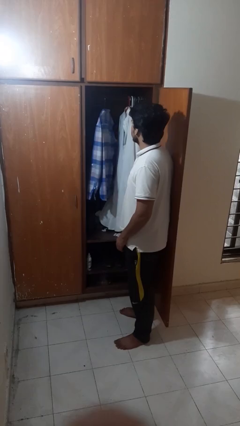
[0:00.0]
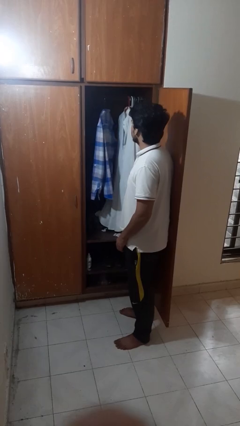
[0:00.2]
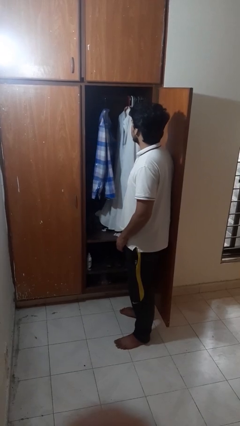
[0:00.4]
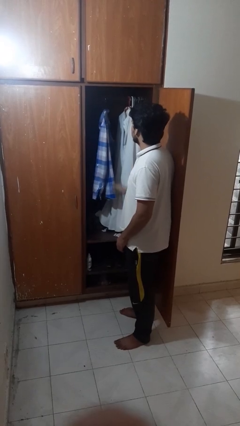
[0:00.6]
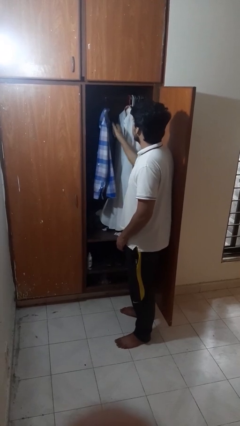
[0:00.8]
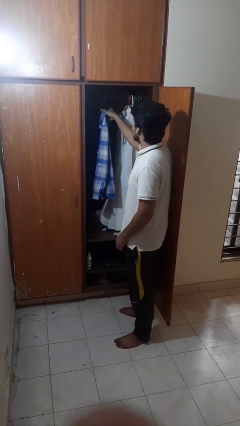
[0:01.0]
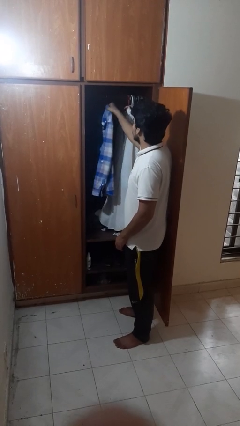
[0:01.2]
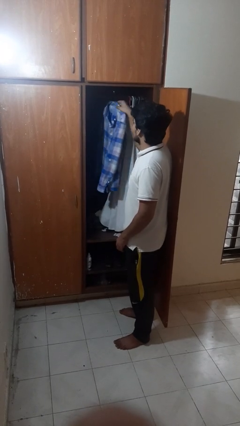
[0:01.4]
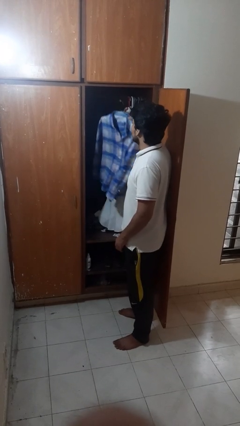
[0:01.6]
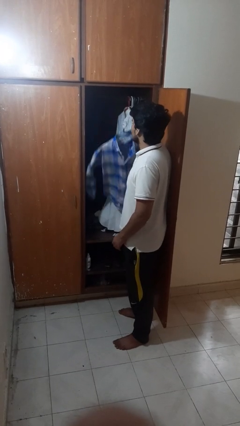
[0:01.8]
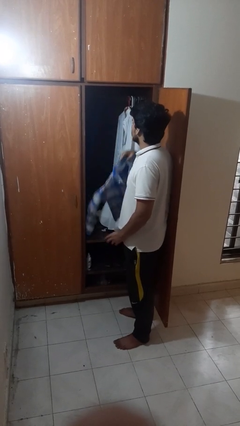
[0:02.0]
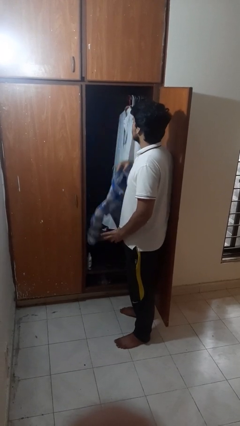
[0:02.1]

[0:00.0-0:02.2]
person takes clothes from closet

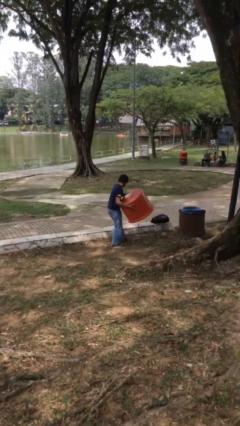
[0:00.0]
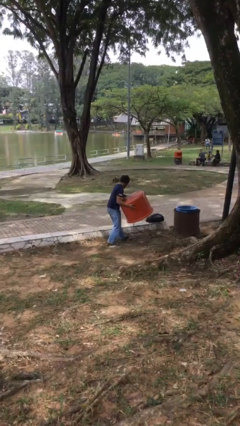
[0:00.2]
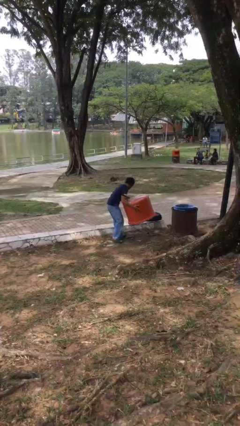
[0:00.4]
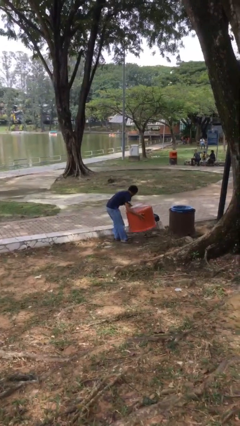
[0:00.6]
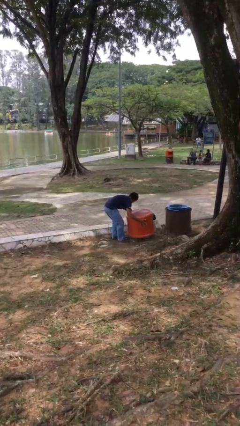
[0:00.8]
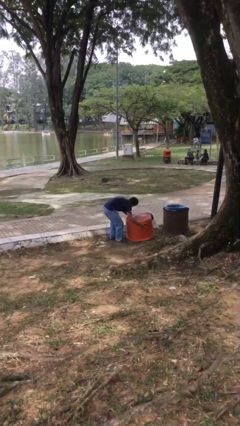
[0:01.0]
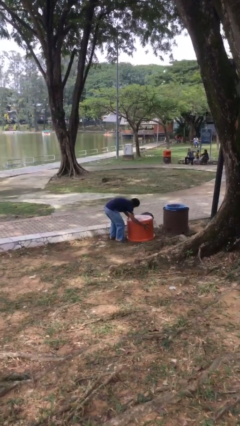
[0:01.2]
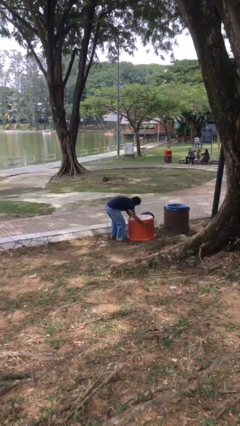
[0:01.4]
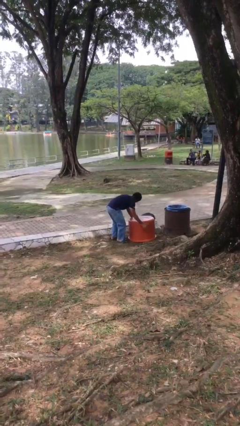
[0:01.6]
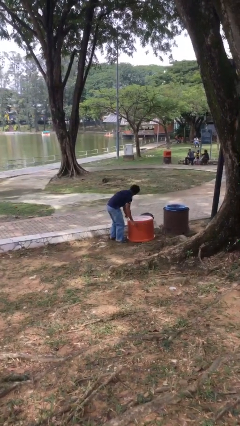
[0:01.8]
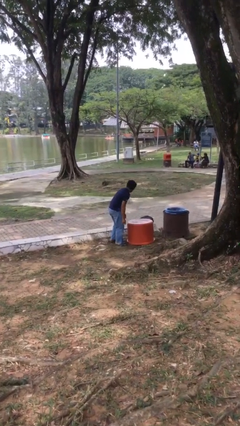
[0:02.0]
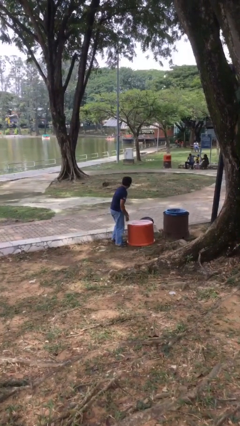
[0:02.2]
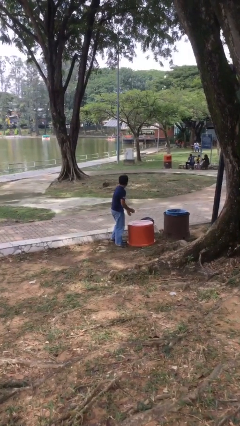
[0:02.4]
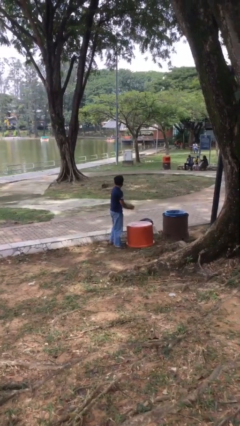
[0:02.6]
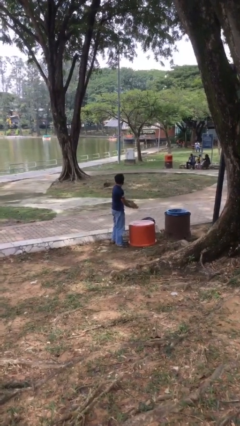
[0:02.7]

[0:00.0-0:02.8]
person puts down object on floor

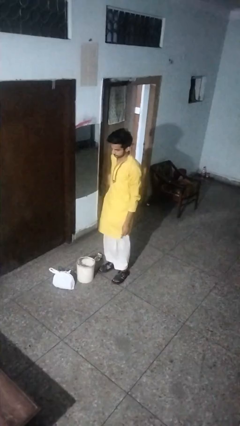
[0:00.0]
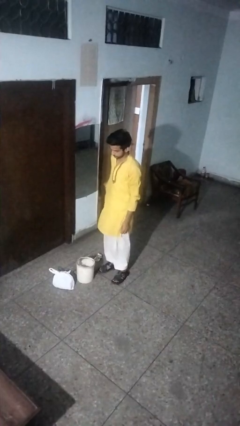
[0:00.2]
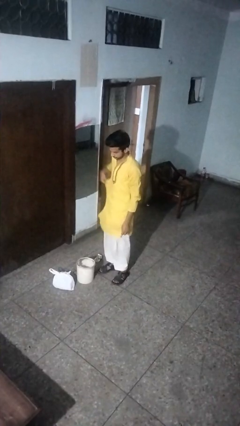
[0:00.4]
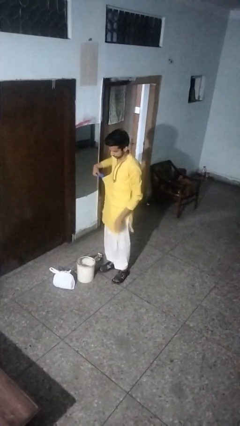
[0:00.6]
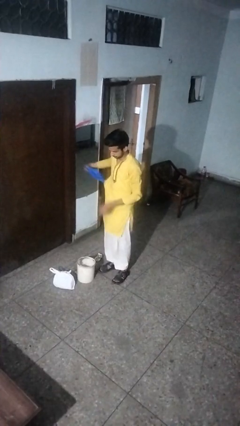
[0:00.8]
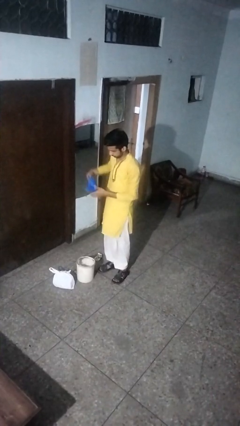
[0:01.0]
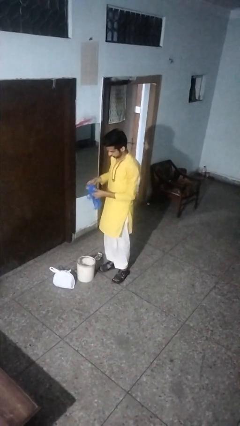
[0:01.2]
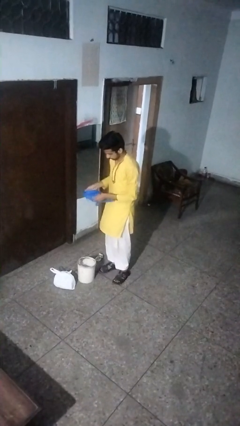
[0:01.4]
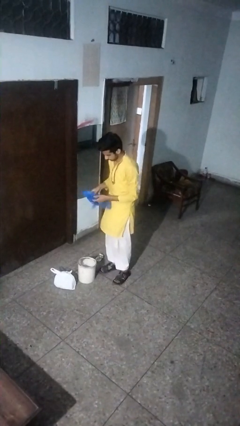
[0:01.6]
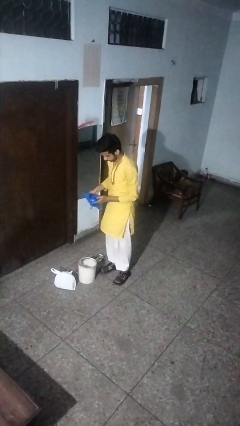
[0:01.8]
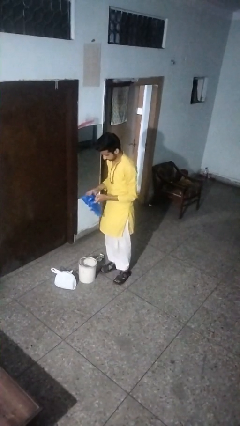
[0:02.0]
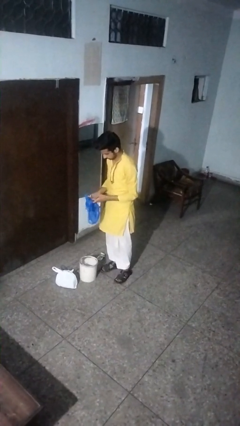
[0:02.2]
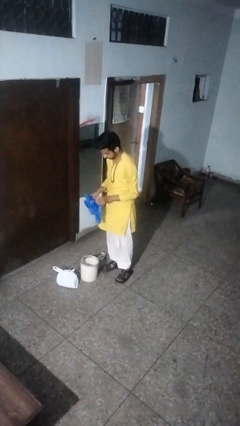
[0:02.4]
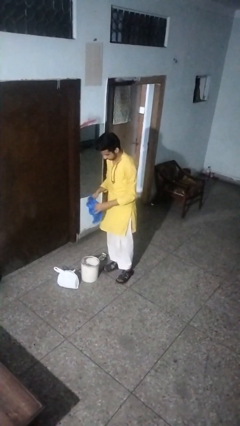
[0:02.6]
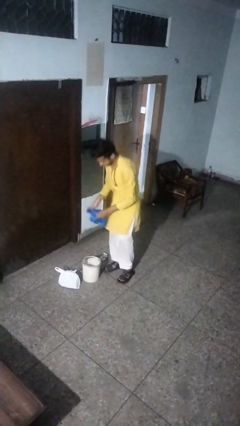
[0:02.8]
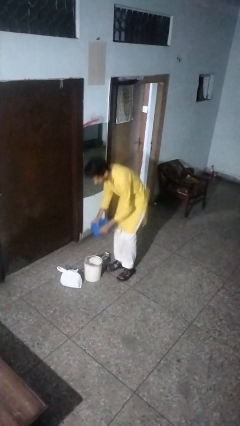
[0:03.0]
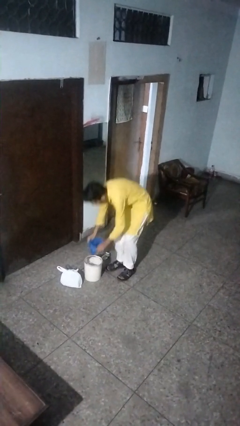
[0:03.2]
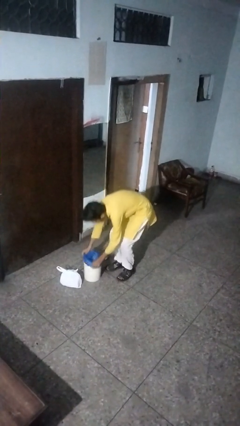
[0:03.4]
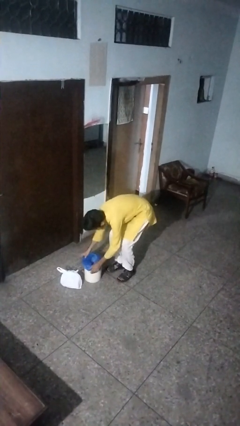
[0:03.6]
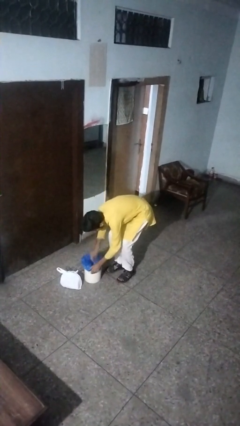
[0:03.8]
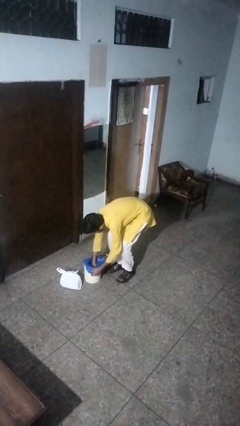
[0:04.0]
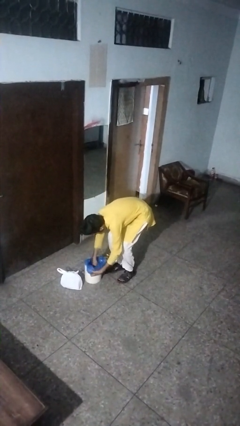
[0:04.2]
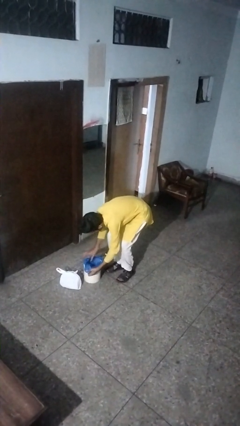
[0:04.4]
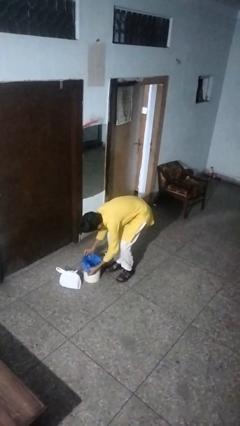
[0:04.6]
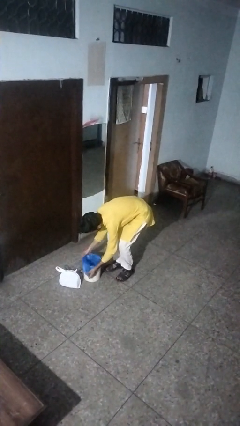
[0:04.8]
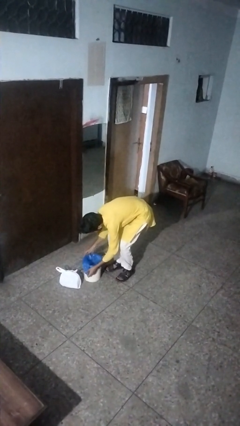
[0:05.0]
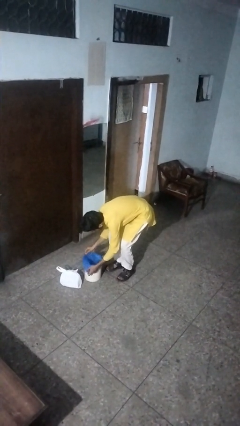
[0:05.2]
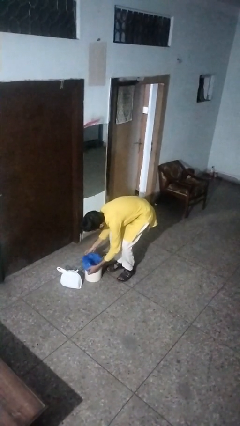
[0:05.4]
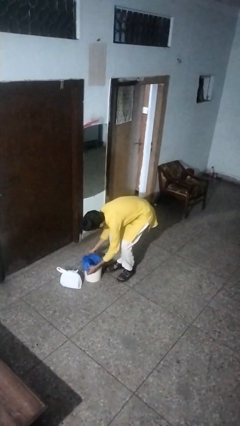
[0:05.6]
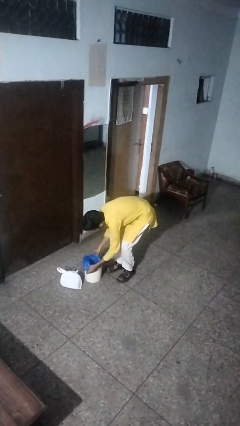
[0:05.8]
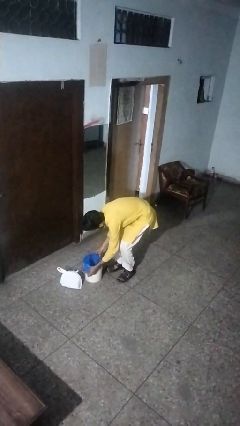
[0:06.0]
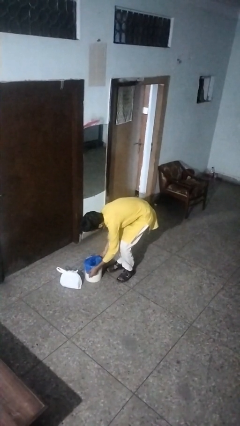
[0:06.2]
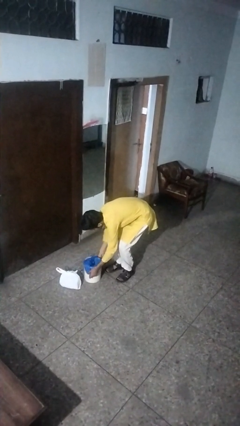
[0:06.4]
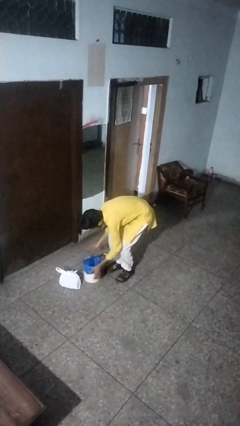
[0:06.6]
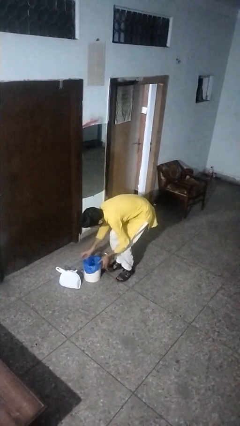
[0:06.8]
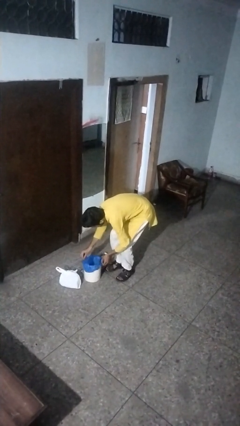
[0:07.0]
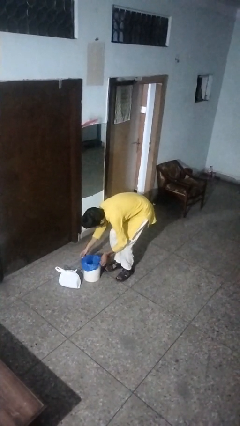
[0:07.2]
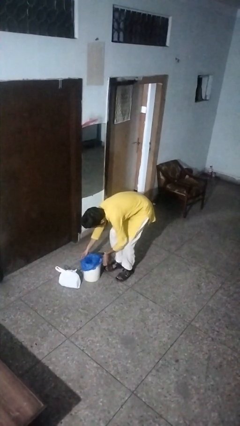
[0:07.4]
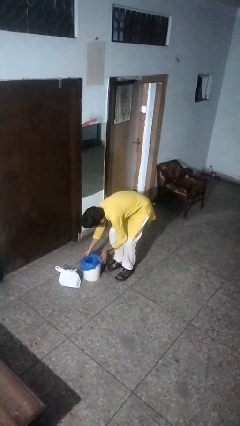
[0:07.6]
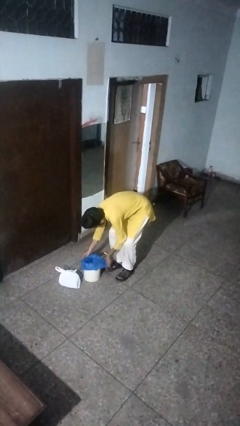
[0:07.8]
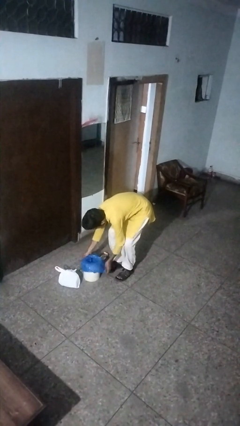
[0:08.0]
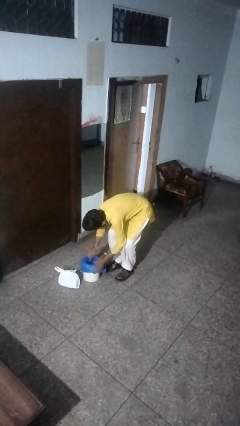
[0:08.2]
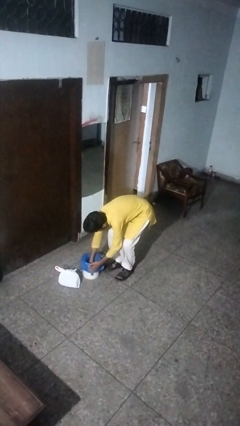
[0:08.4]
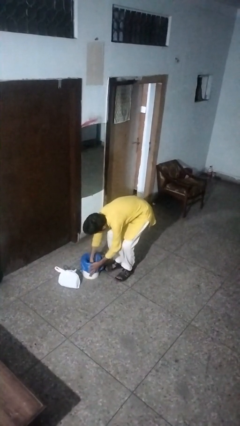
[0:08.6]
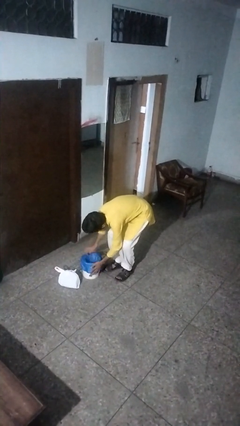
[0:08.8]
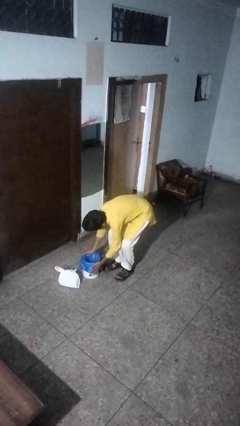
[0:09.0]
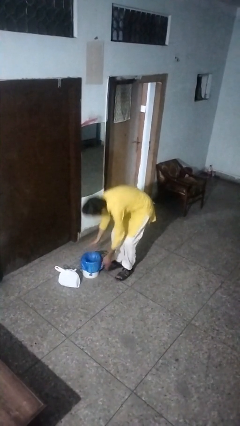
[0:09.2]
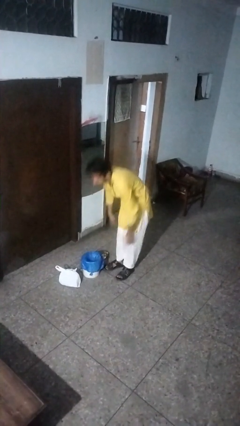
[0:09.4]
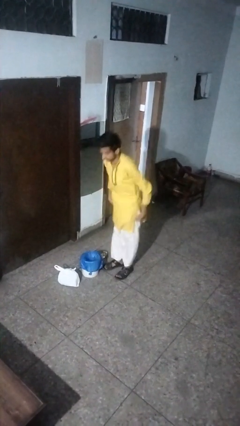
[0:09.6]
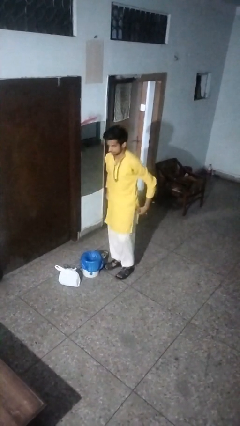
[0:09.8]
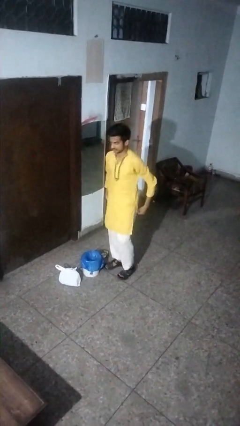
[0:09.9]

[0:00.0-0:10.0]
person inserts trashbag into trashcan

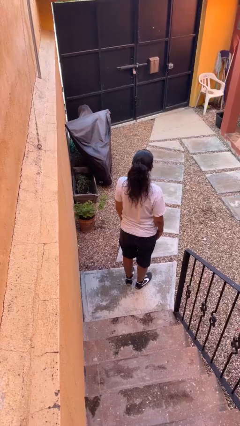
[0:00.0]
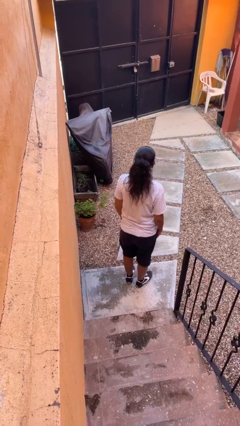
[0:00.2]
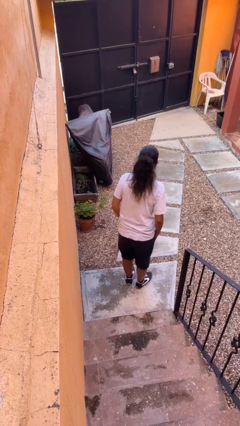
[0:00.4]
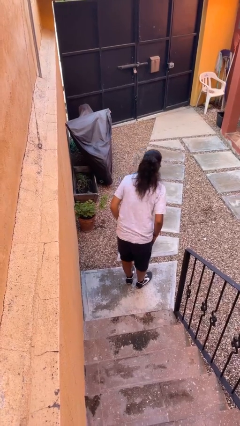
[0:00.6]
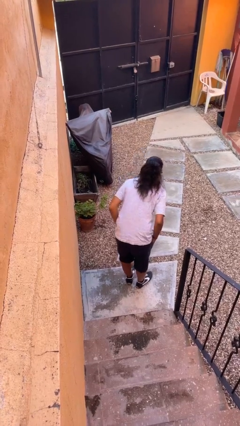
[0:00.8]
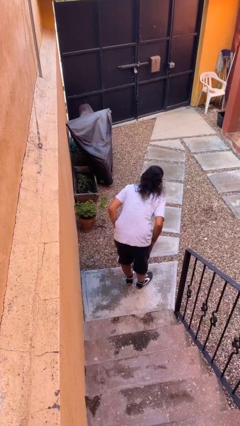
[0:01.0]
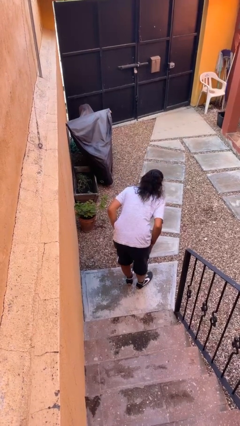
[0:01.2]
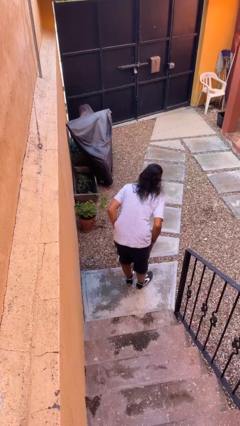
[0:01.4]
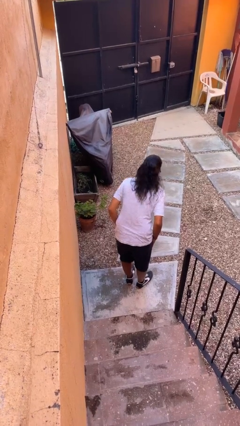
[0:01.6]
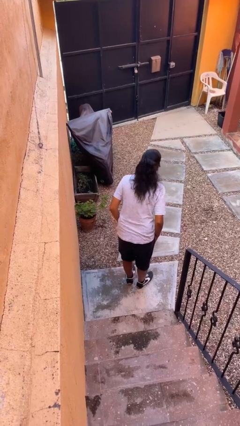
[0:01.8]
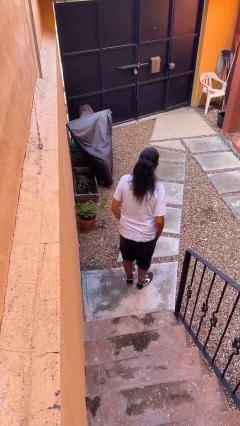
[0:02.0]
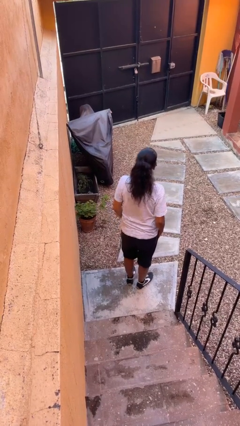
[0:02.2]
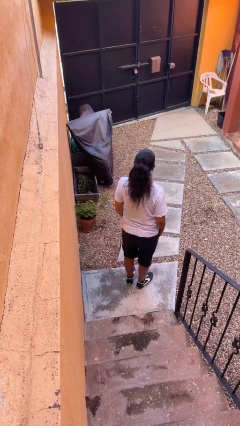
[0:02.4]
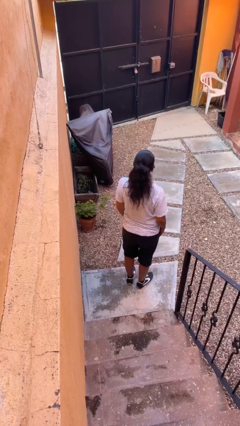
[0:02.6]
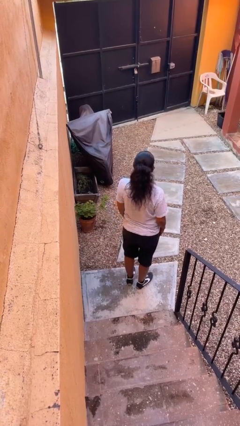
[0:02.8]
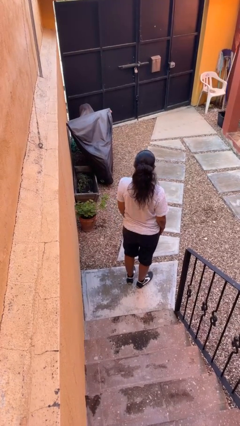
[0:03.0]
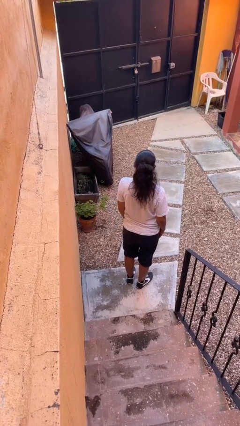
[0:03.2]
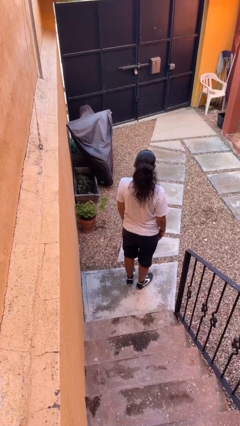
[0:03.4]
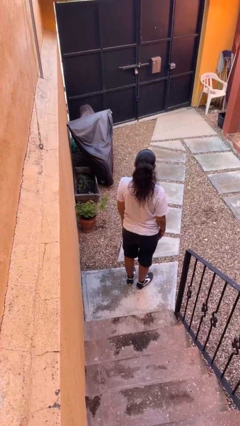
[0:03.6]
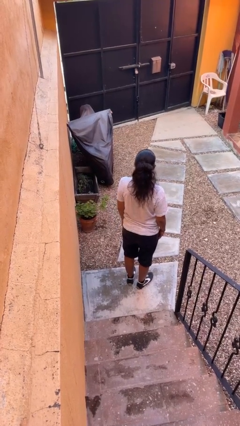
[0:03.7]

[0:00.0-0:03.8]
person bows
